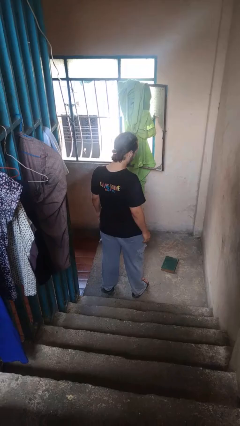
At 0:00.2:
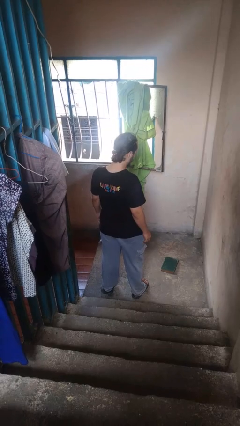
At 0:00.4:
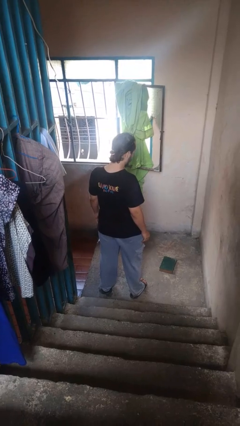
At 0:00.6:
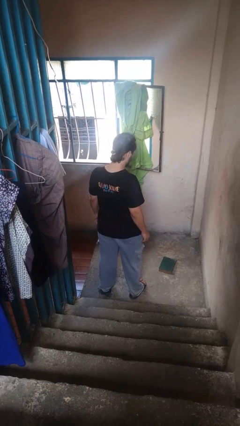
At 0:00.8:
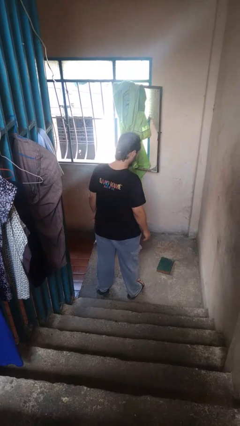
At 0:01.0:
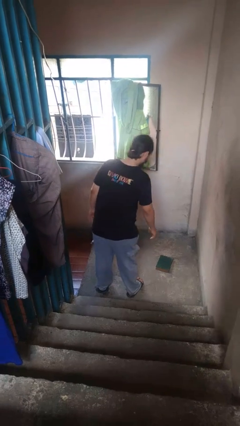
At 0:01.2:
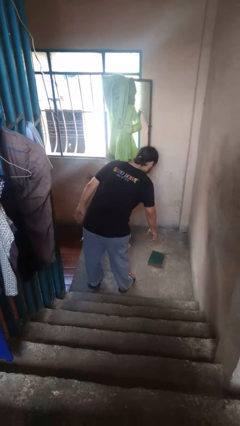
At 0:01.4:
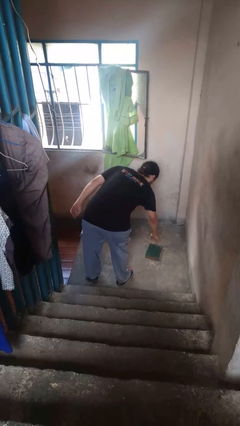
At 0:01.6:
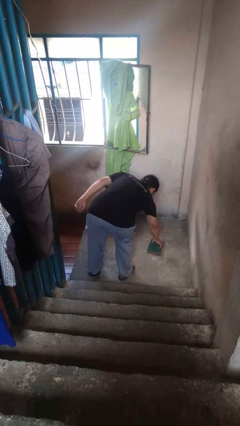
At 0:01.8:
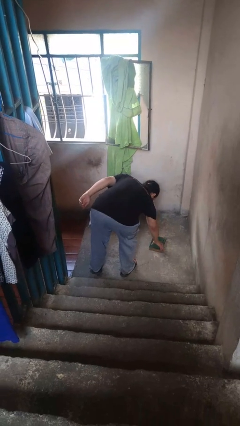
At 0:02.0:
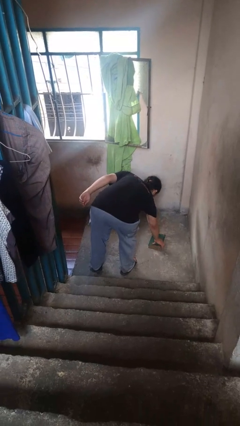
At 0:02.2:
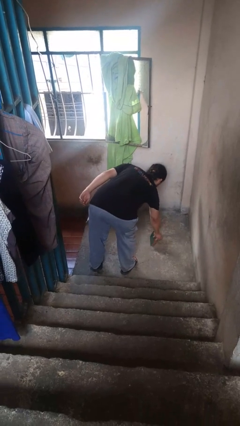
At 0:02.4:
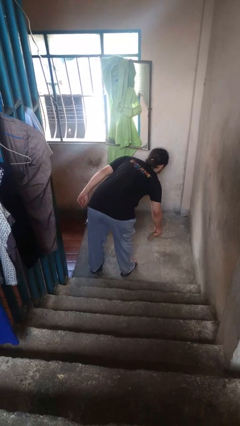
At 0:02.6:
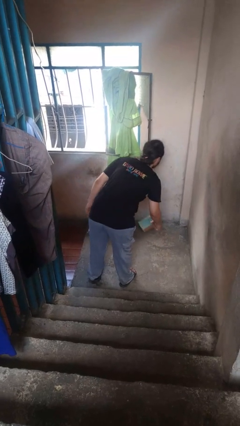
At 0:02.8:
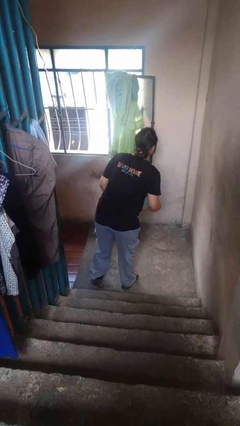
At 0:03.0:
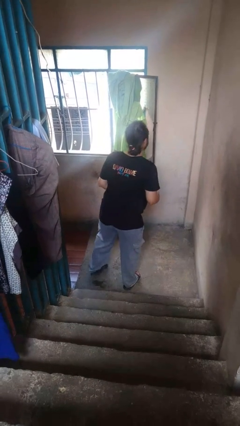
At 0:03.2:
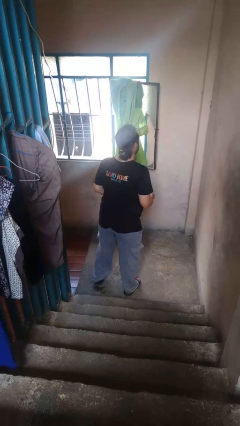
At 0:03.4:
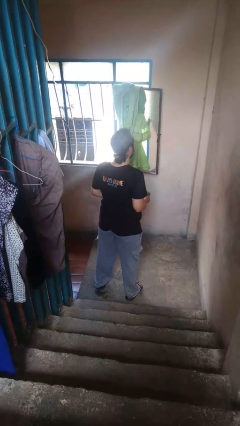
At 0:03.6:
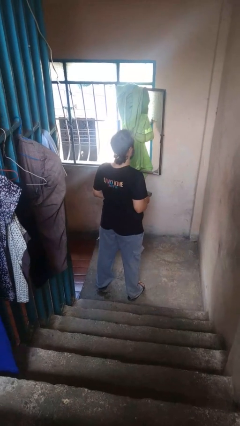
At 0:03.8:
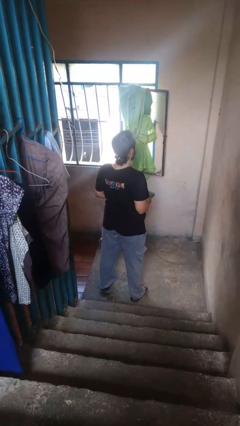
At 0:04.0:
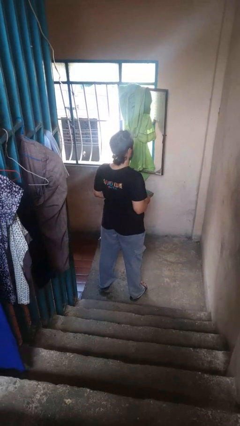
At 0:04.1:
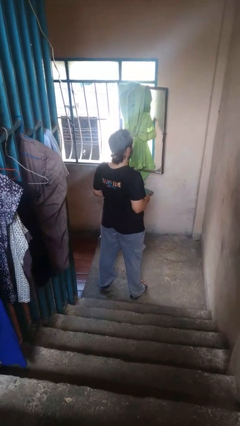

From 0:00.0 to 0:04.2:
person picks up object from floor

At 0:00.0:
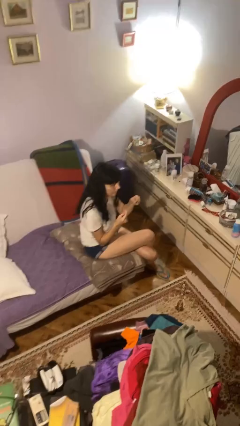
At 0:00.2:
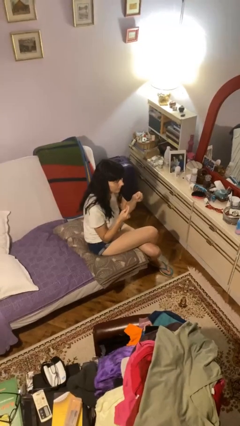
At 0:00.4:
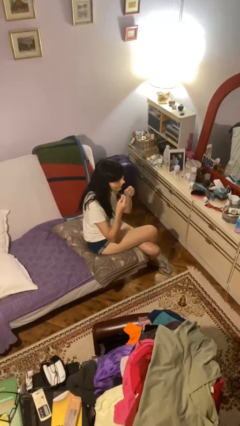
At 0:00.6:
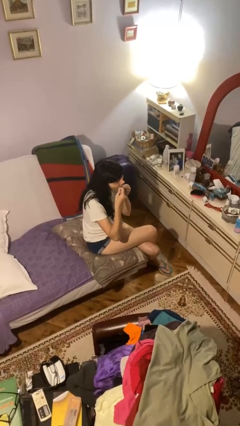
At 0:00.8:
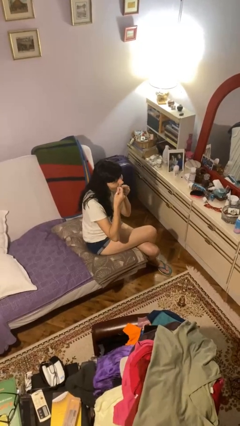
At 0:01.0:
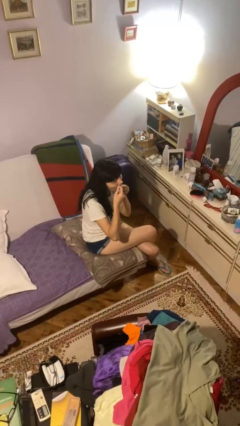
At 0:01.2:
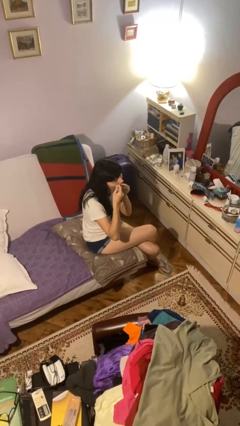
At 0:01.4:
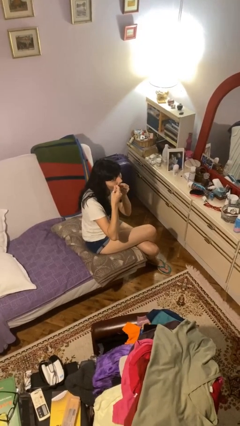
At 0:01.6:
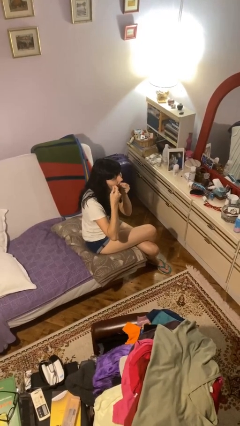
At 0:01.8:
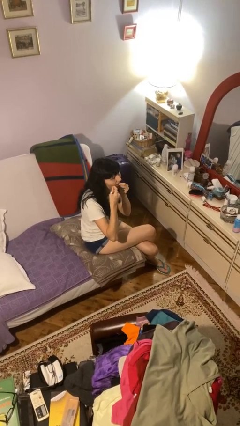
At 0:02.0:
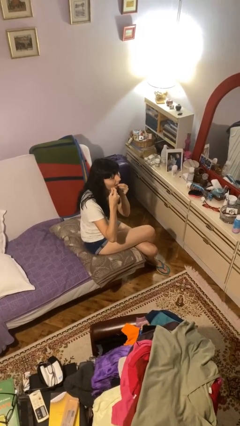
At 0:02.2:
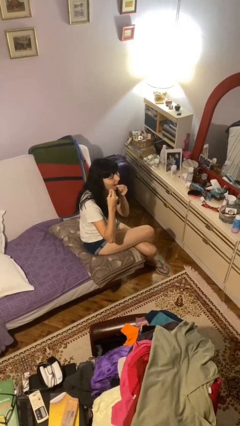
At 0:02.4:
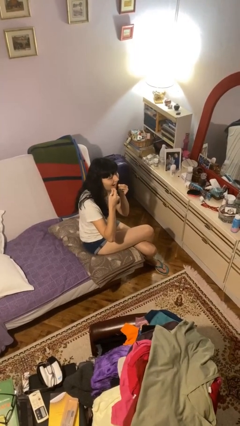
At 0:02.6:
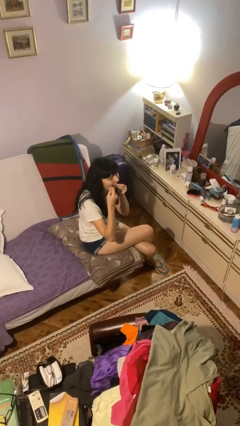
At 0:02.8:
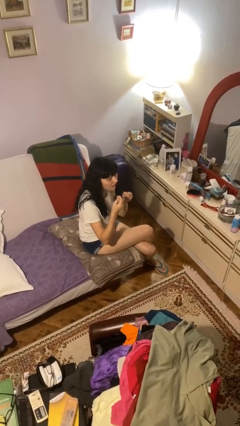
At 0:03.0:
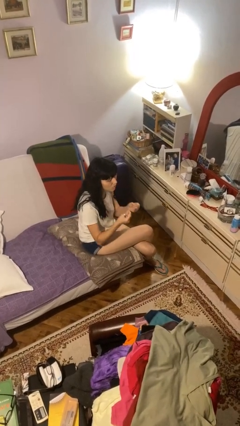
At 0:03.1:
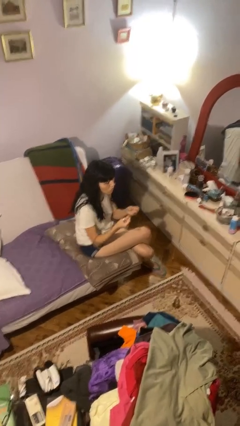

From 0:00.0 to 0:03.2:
person flosses

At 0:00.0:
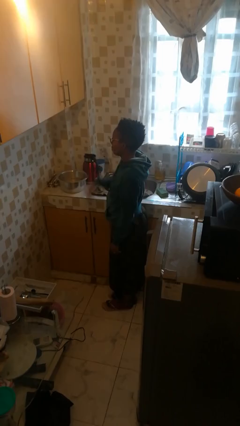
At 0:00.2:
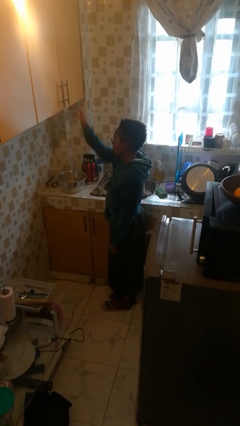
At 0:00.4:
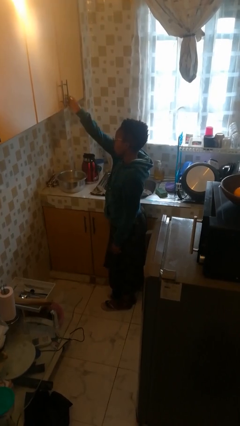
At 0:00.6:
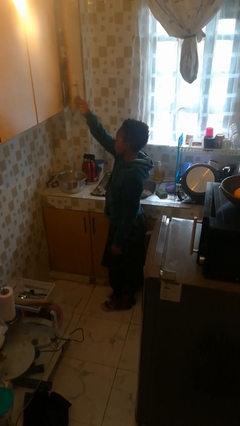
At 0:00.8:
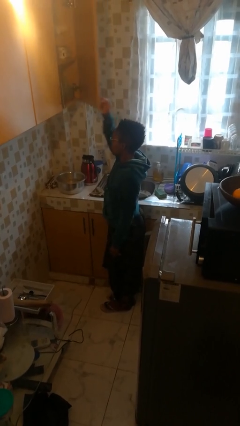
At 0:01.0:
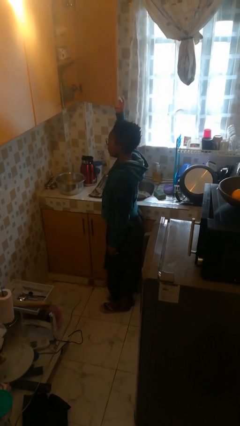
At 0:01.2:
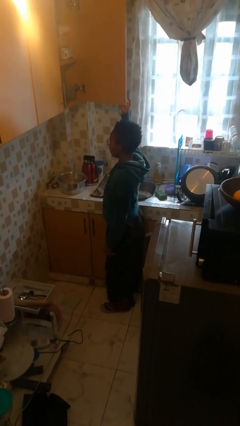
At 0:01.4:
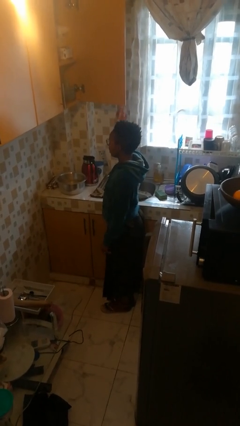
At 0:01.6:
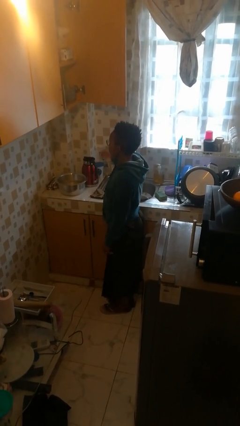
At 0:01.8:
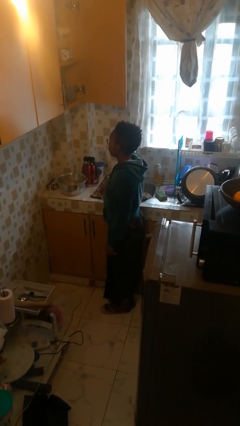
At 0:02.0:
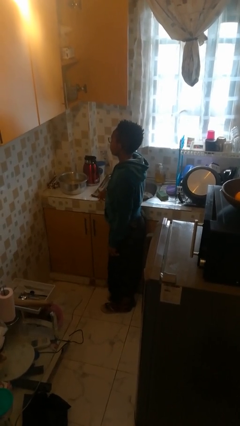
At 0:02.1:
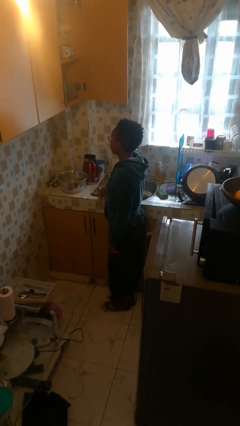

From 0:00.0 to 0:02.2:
person opens cabinet

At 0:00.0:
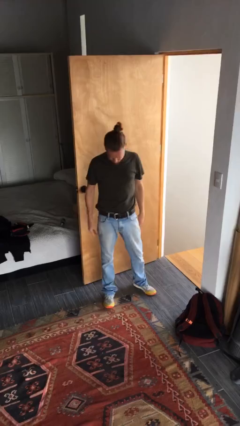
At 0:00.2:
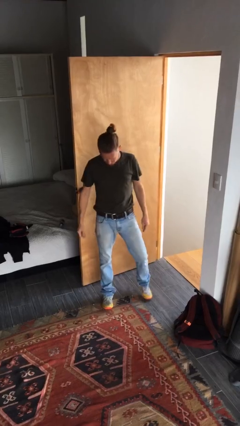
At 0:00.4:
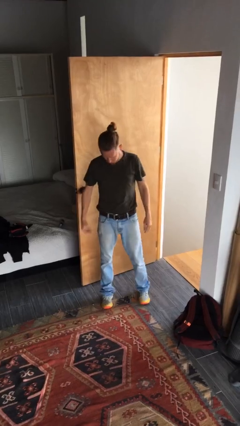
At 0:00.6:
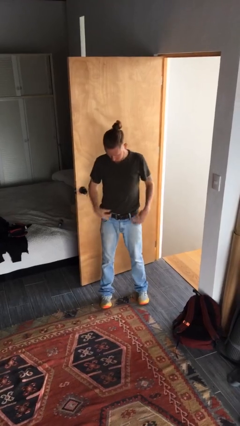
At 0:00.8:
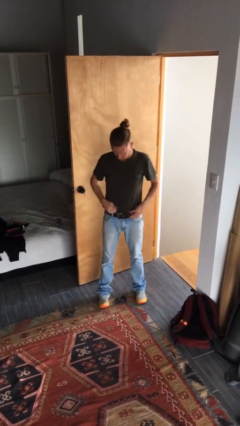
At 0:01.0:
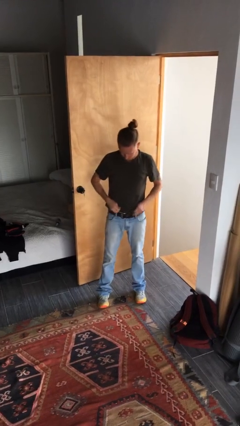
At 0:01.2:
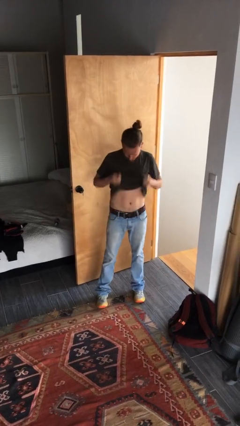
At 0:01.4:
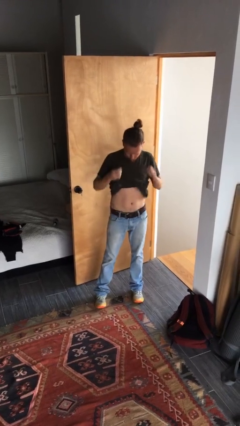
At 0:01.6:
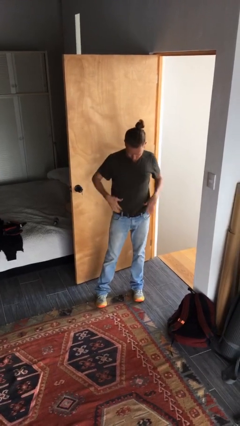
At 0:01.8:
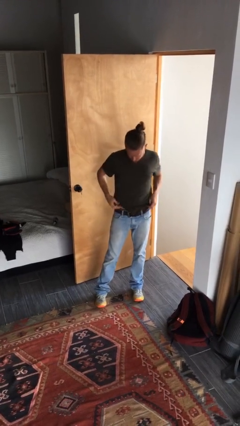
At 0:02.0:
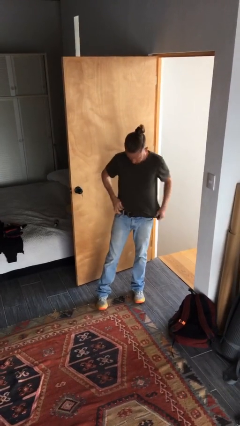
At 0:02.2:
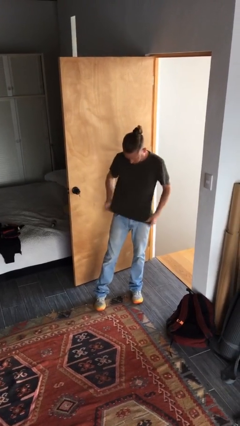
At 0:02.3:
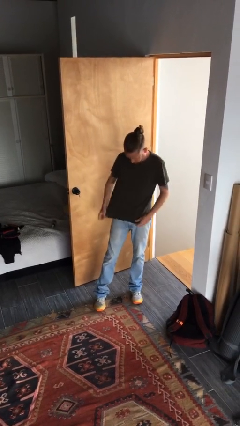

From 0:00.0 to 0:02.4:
person untucks shirt

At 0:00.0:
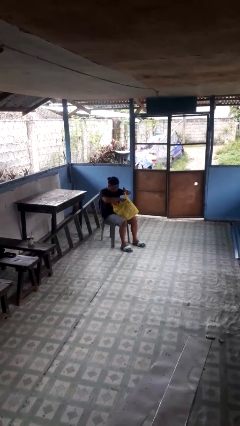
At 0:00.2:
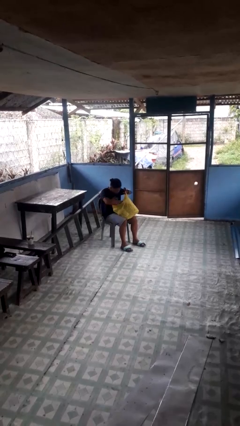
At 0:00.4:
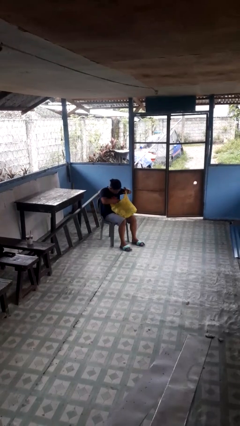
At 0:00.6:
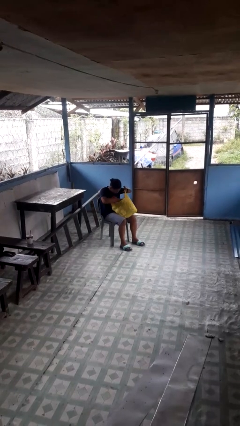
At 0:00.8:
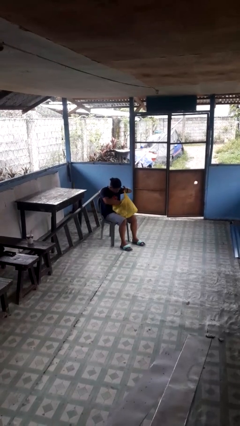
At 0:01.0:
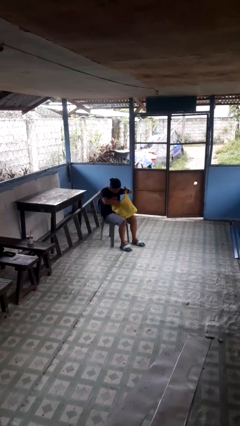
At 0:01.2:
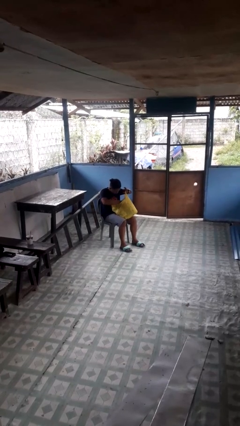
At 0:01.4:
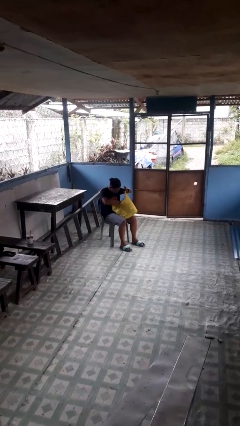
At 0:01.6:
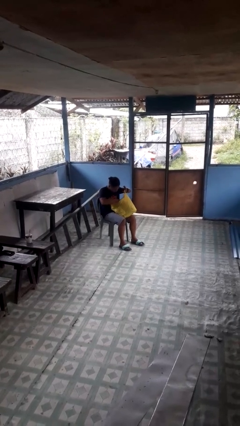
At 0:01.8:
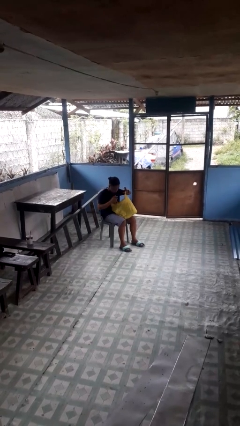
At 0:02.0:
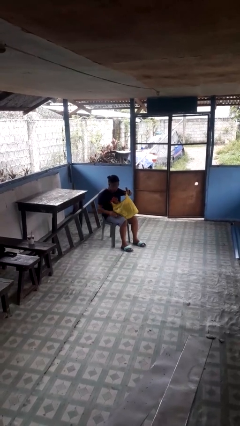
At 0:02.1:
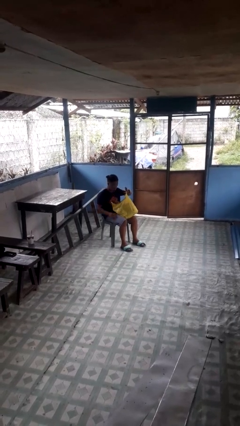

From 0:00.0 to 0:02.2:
person searches in bag

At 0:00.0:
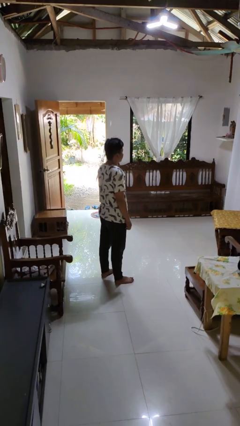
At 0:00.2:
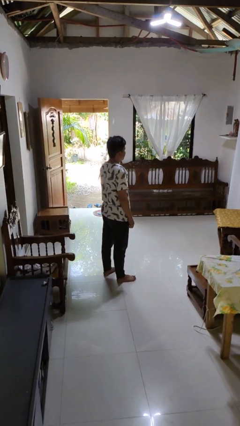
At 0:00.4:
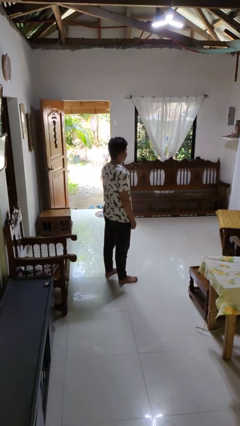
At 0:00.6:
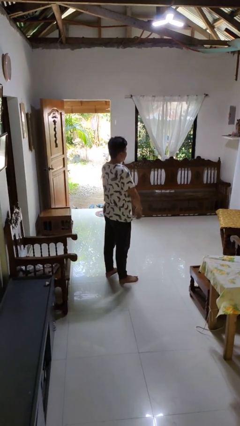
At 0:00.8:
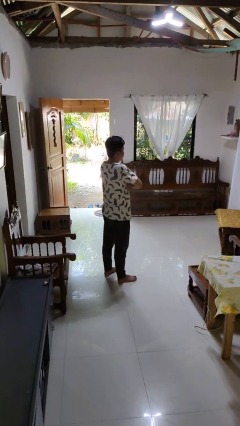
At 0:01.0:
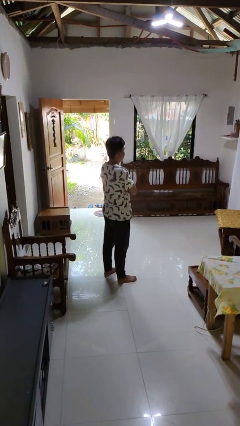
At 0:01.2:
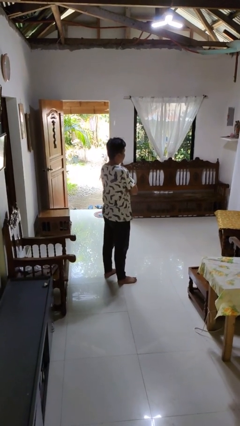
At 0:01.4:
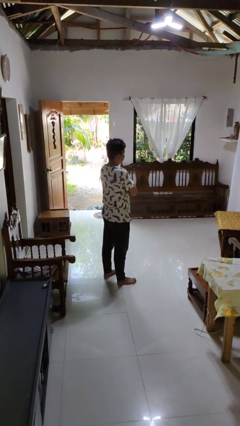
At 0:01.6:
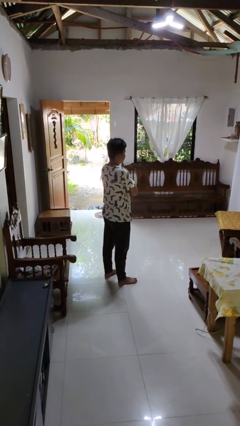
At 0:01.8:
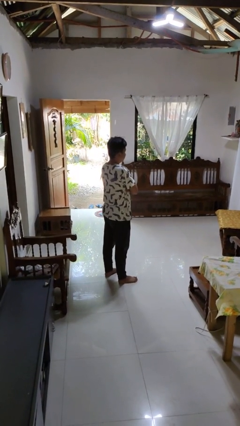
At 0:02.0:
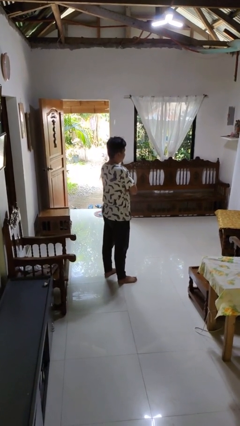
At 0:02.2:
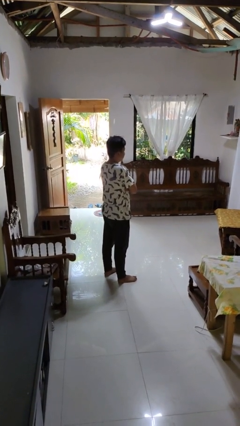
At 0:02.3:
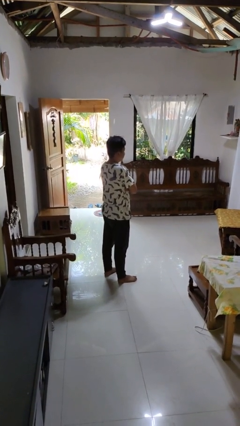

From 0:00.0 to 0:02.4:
person crosses arms

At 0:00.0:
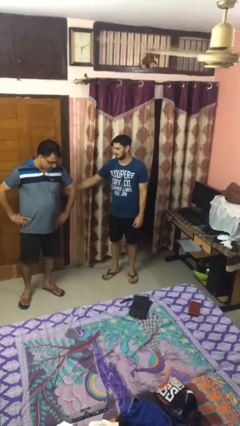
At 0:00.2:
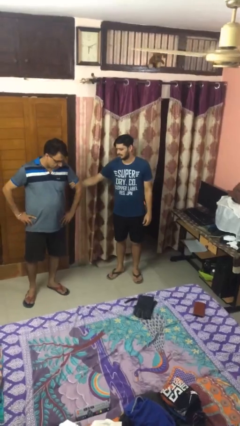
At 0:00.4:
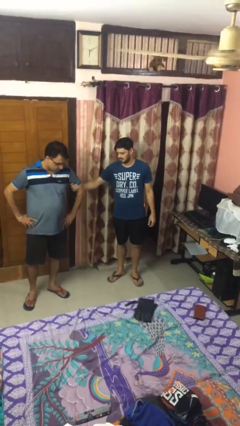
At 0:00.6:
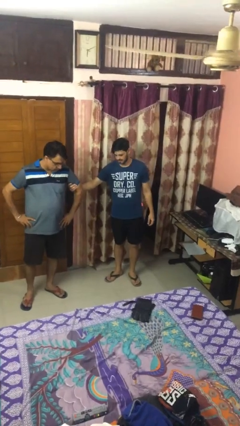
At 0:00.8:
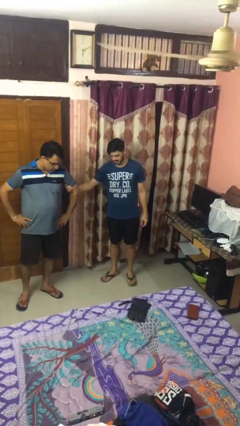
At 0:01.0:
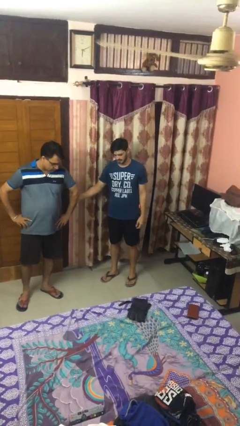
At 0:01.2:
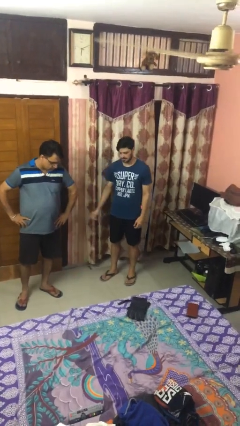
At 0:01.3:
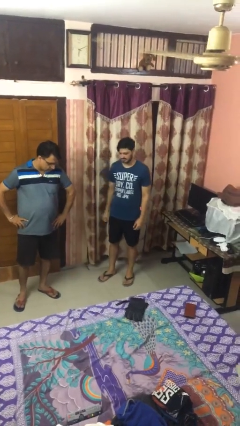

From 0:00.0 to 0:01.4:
person grabs person by bicep
